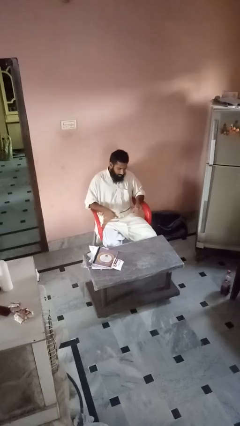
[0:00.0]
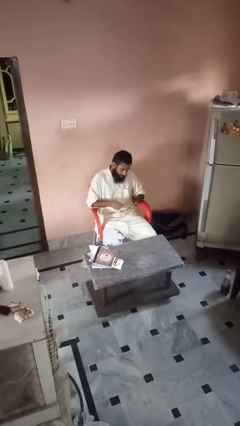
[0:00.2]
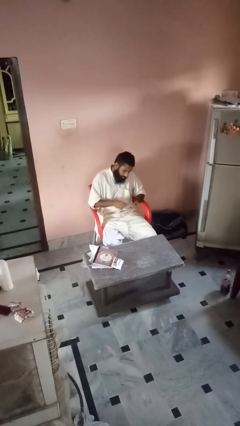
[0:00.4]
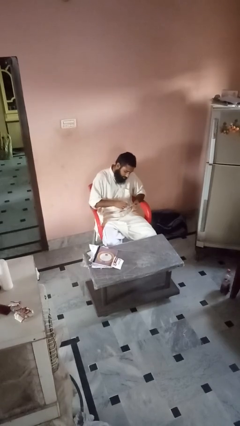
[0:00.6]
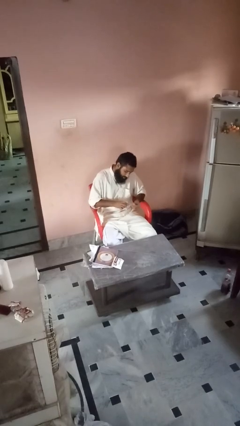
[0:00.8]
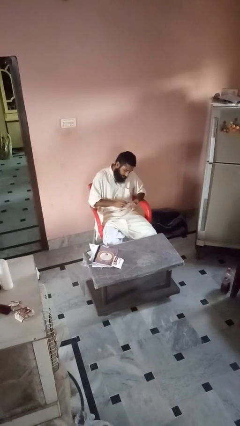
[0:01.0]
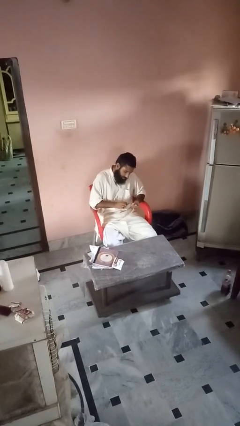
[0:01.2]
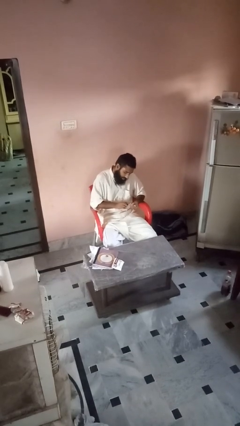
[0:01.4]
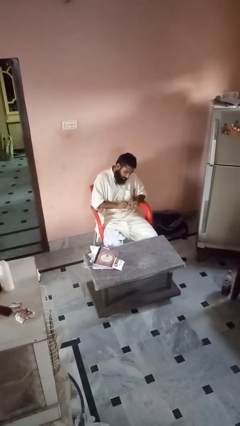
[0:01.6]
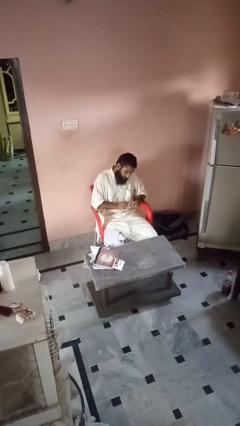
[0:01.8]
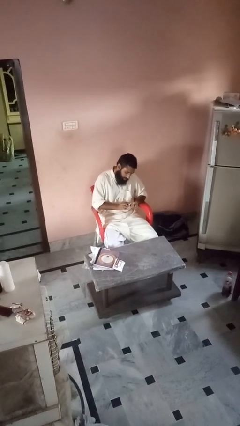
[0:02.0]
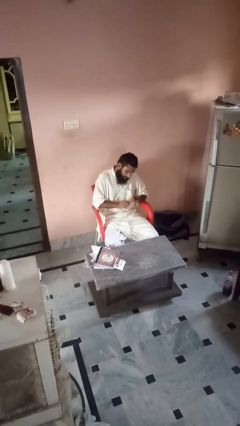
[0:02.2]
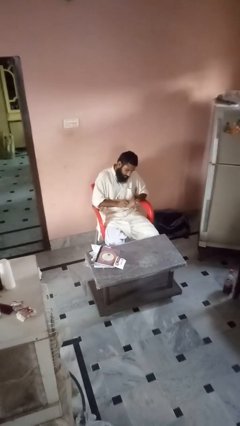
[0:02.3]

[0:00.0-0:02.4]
person files fingernails

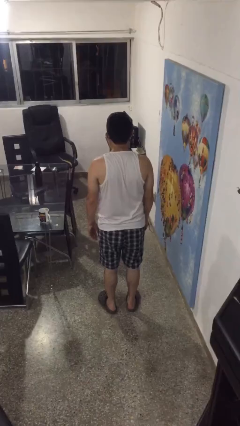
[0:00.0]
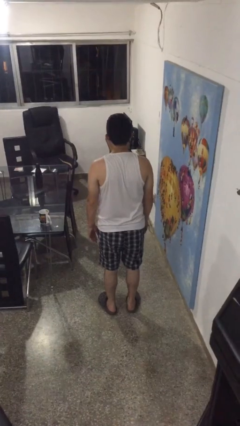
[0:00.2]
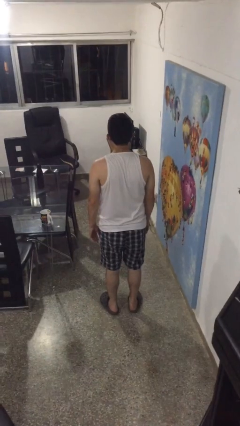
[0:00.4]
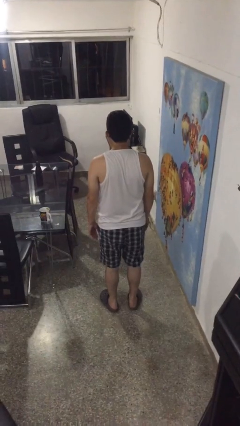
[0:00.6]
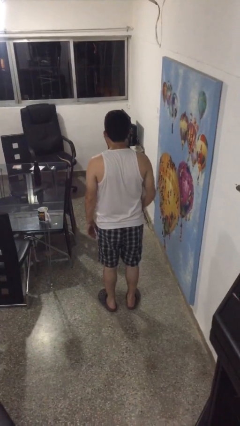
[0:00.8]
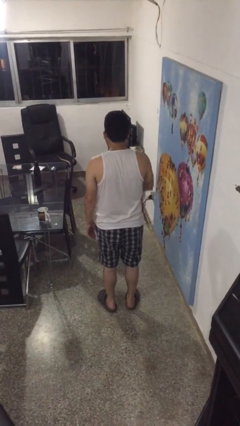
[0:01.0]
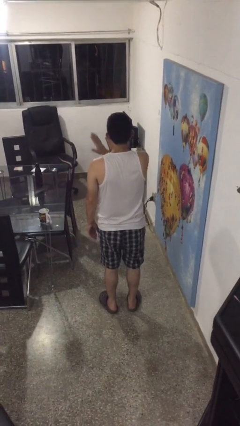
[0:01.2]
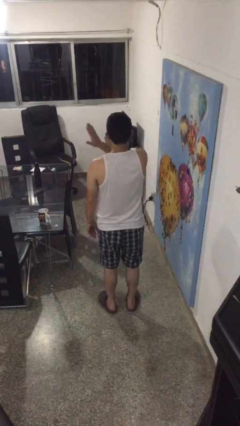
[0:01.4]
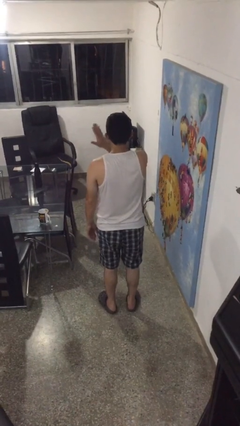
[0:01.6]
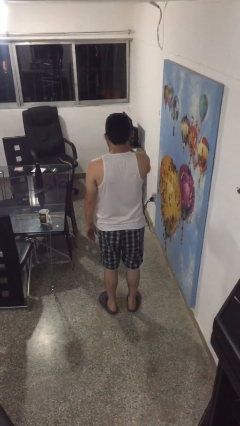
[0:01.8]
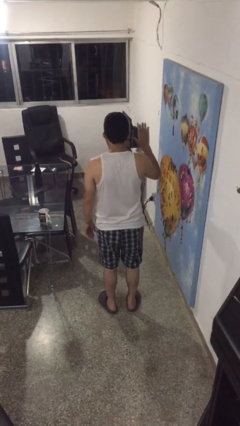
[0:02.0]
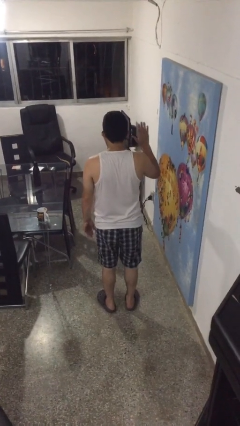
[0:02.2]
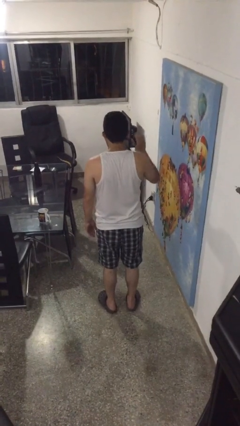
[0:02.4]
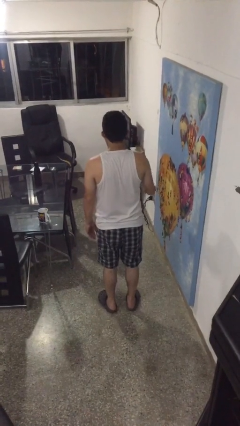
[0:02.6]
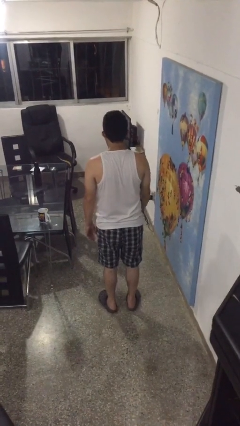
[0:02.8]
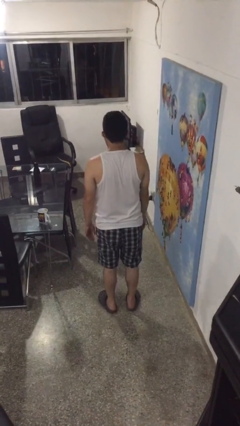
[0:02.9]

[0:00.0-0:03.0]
person gestures swipe right

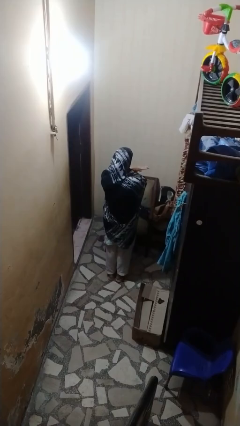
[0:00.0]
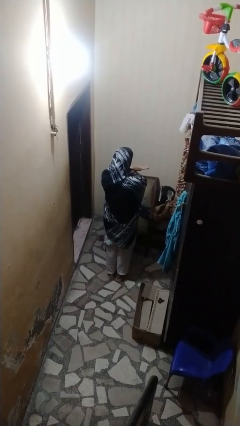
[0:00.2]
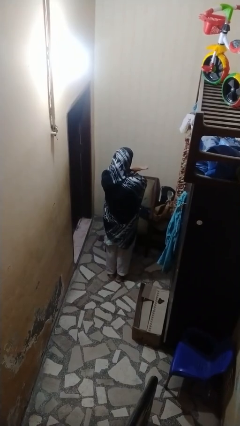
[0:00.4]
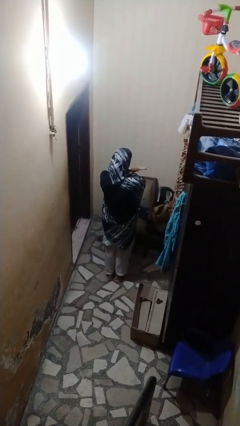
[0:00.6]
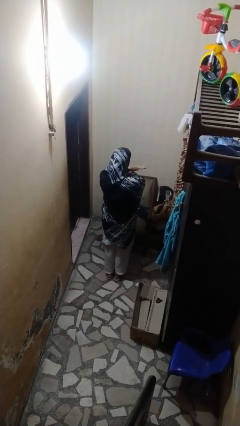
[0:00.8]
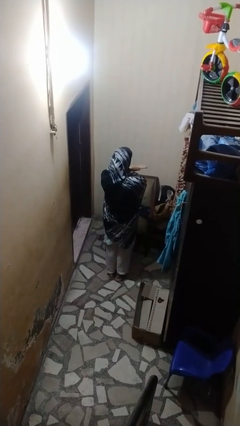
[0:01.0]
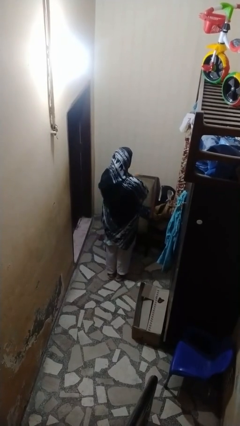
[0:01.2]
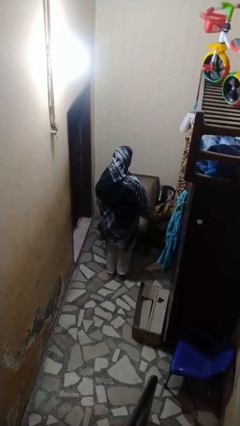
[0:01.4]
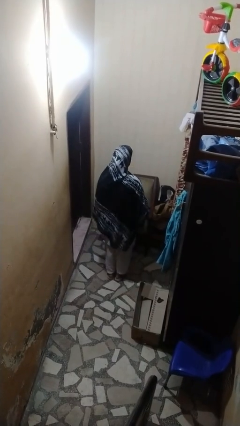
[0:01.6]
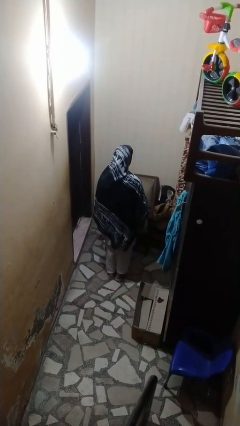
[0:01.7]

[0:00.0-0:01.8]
person gestures arms x

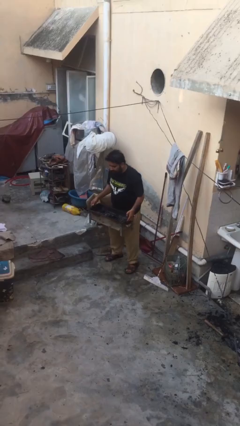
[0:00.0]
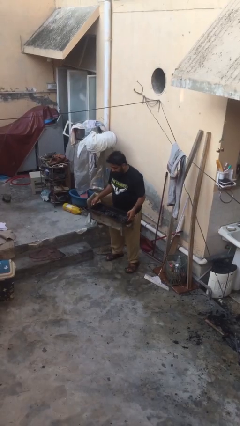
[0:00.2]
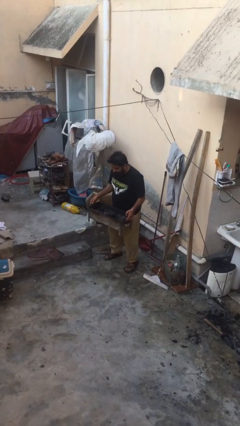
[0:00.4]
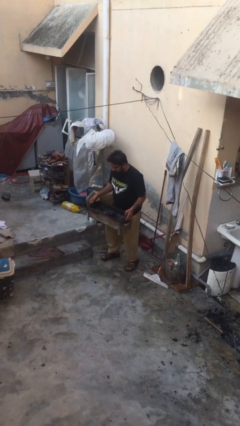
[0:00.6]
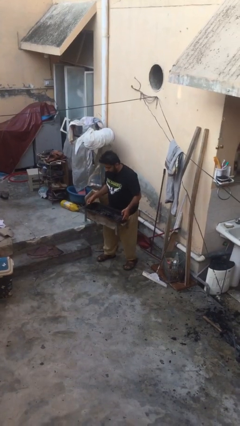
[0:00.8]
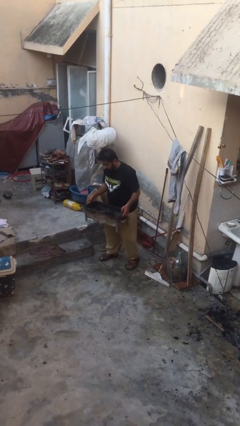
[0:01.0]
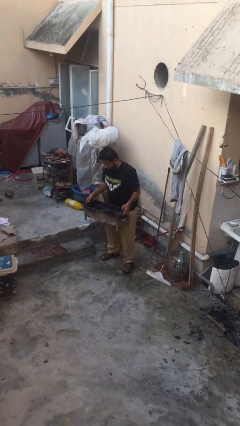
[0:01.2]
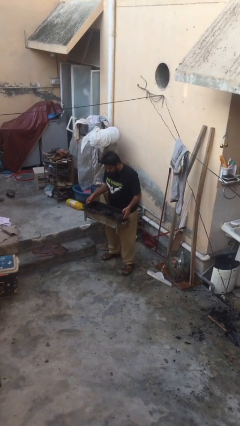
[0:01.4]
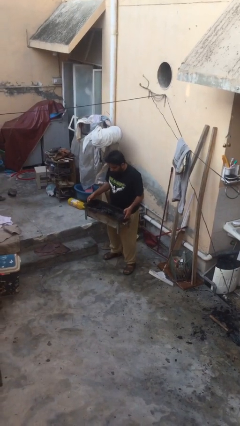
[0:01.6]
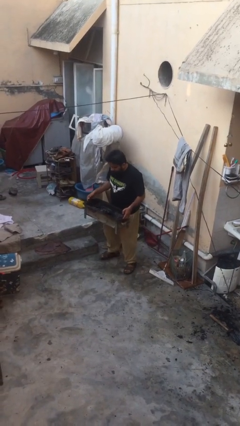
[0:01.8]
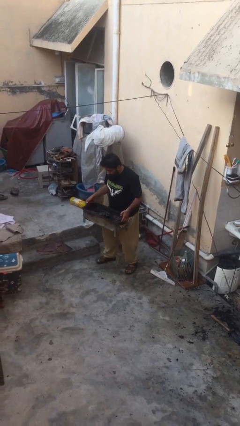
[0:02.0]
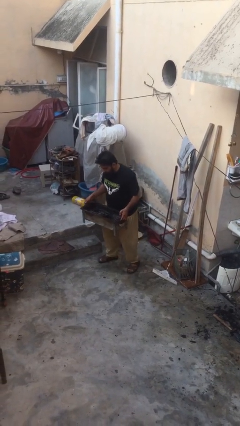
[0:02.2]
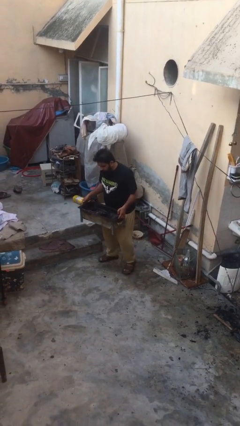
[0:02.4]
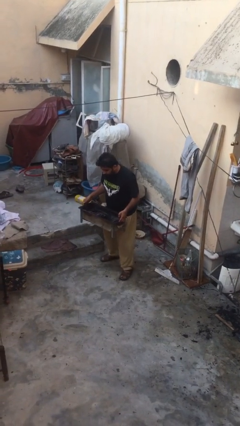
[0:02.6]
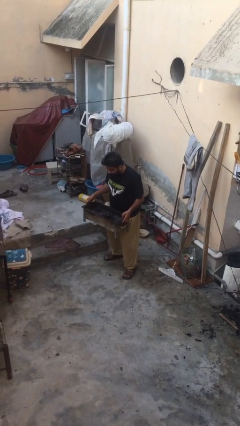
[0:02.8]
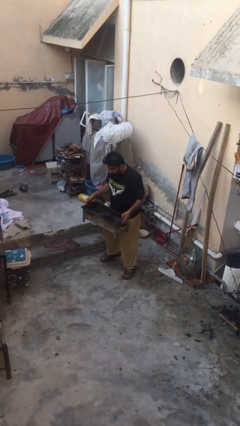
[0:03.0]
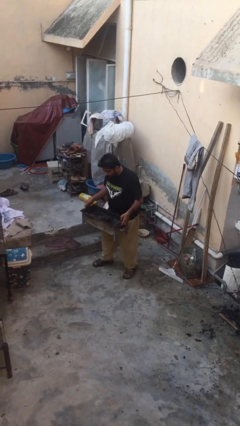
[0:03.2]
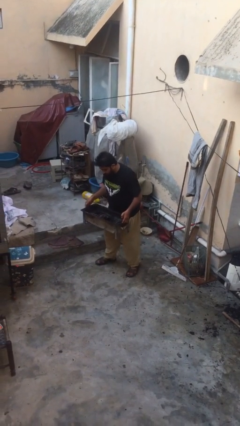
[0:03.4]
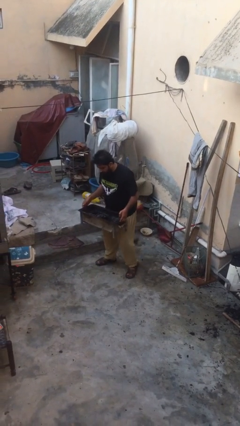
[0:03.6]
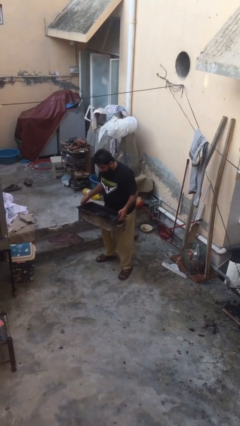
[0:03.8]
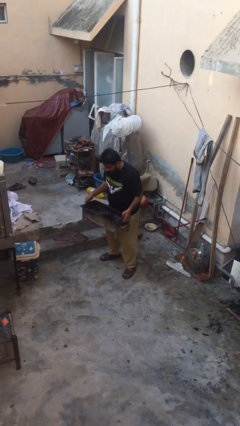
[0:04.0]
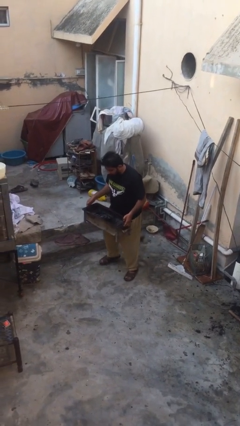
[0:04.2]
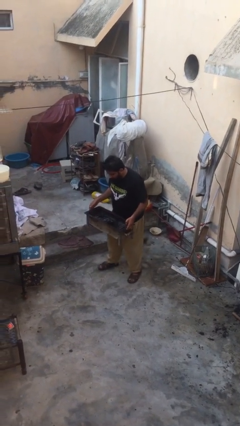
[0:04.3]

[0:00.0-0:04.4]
person carries heavy object

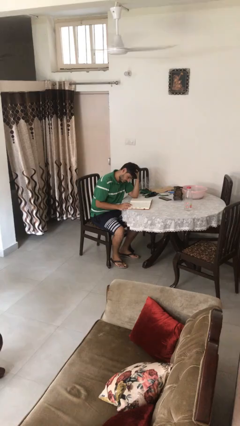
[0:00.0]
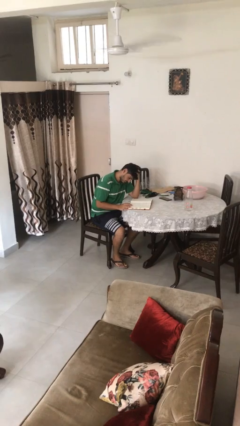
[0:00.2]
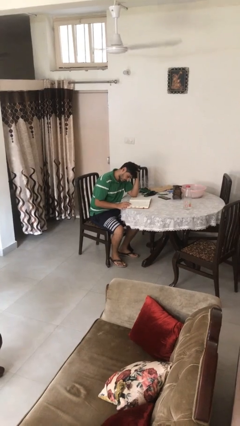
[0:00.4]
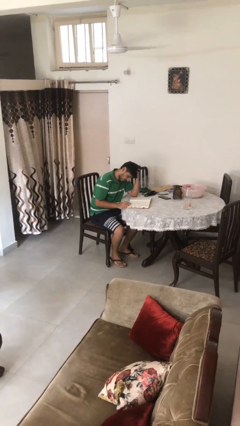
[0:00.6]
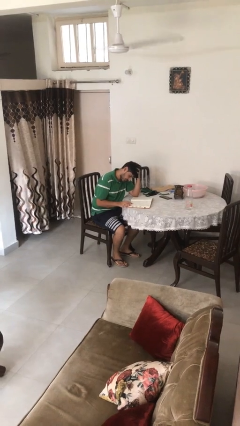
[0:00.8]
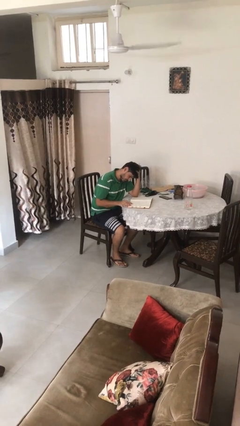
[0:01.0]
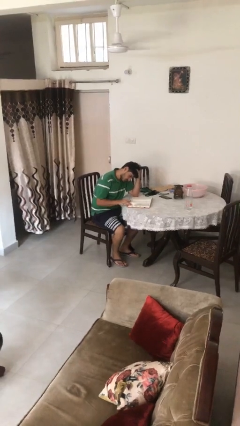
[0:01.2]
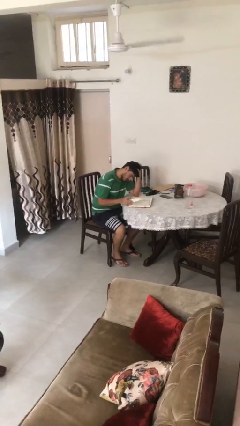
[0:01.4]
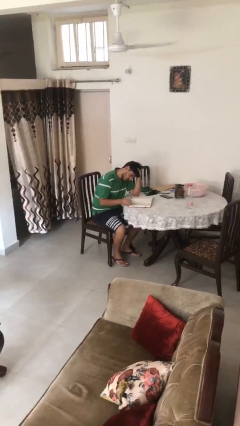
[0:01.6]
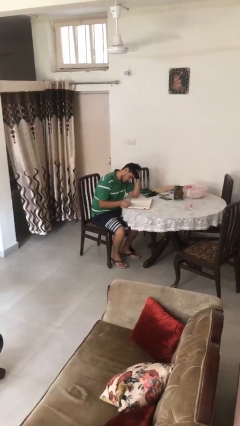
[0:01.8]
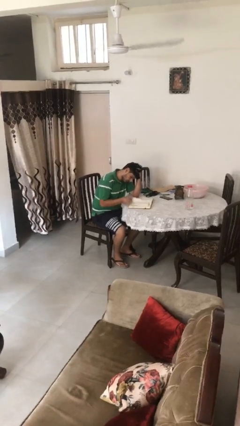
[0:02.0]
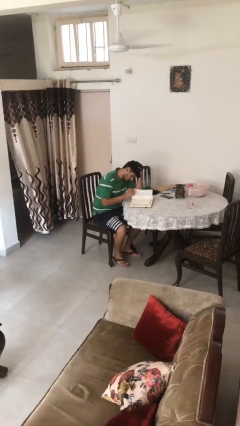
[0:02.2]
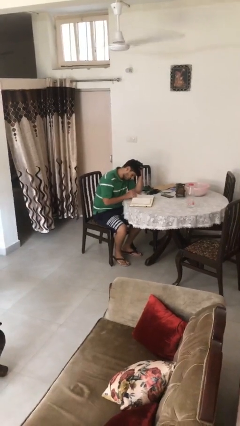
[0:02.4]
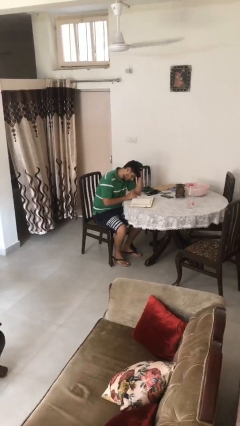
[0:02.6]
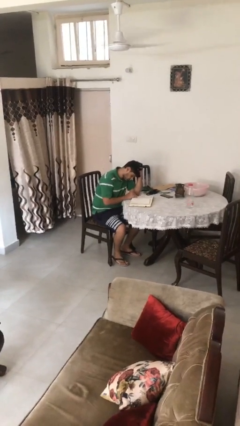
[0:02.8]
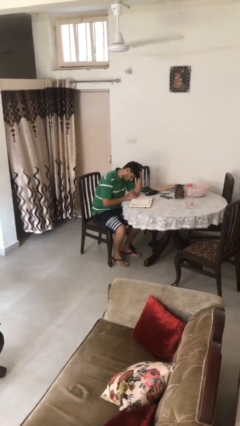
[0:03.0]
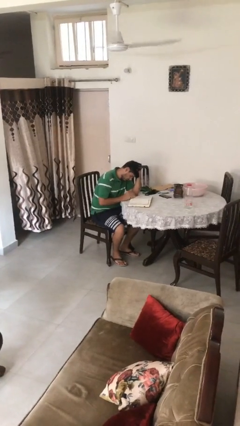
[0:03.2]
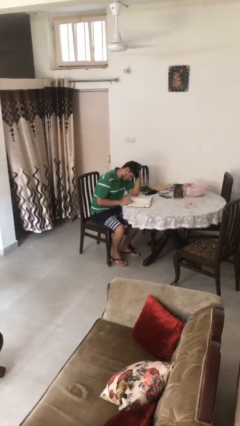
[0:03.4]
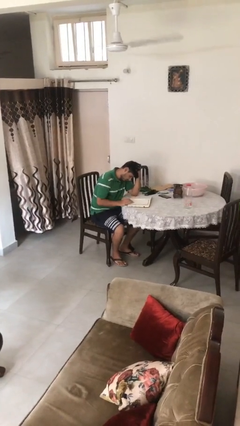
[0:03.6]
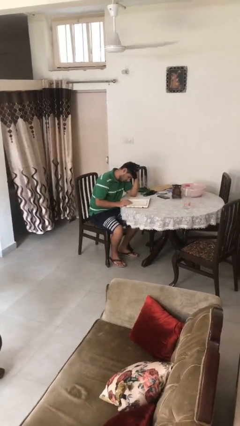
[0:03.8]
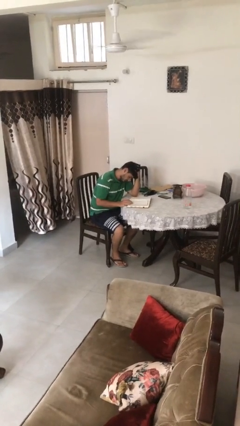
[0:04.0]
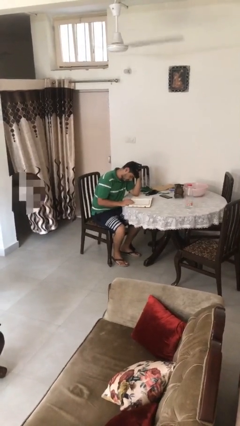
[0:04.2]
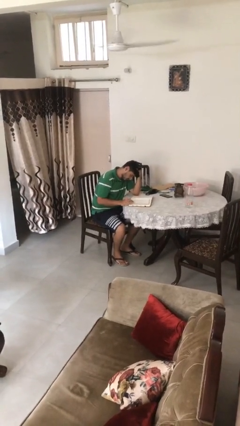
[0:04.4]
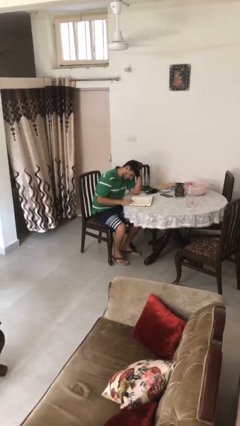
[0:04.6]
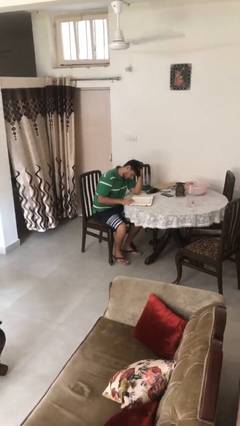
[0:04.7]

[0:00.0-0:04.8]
person reads document

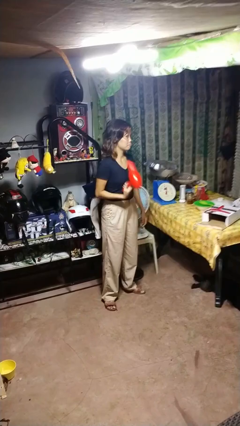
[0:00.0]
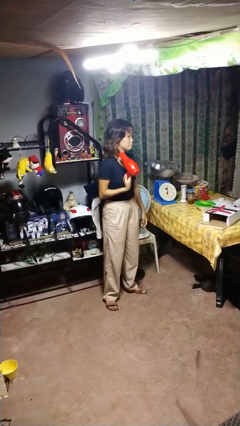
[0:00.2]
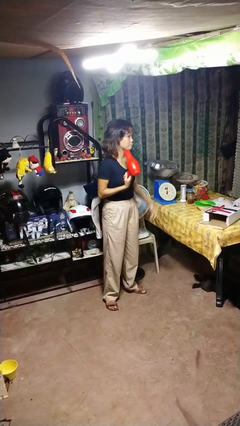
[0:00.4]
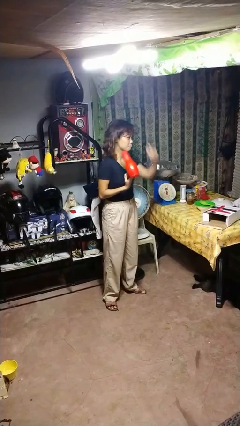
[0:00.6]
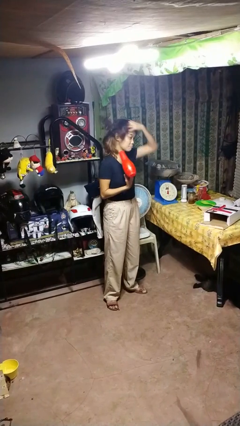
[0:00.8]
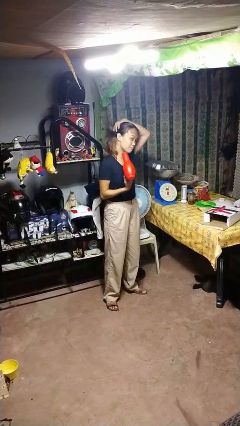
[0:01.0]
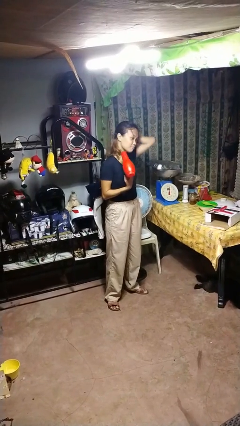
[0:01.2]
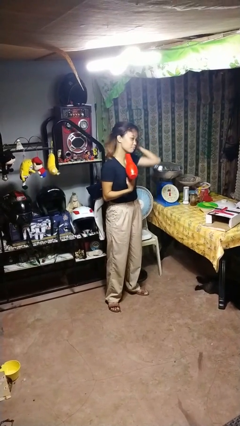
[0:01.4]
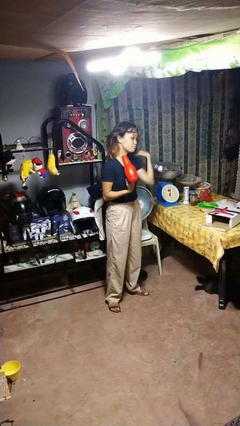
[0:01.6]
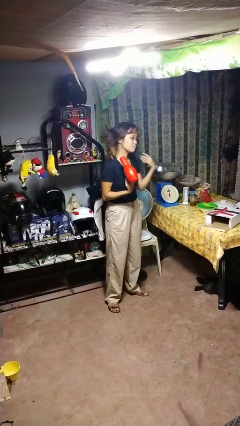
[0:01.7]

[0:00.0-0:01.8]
person dries hair with hairdryer
